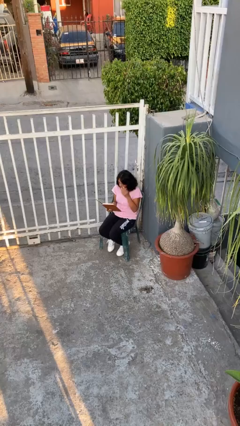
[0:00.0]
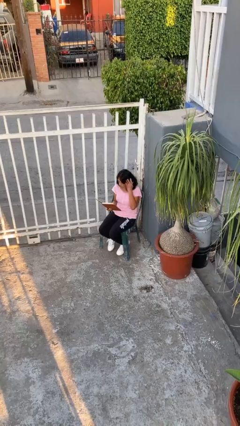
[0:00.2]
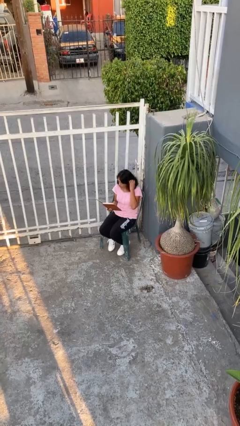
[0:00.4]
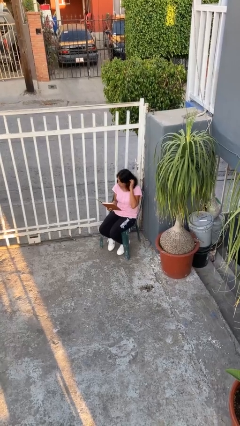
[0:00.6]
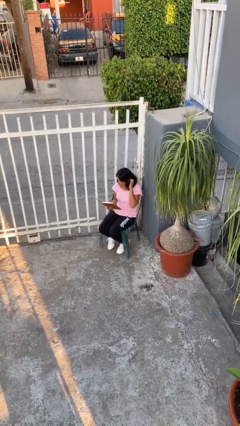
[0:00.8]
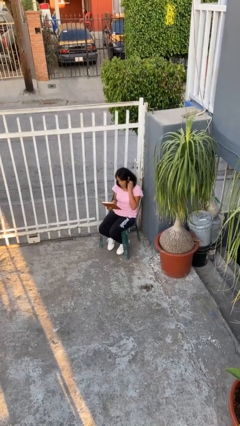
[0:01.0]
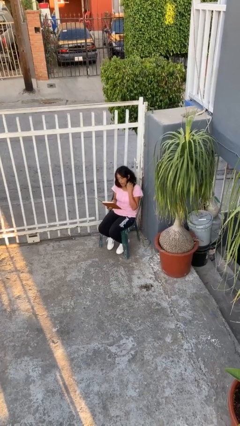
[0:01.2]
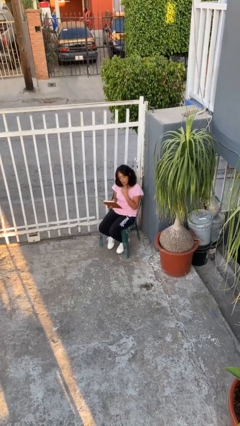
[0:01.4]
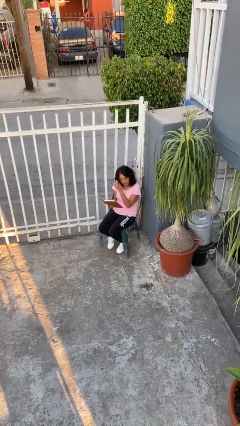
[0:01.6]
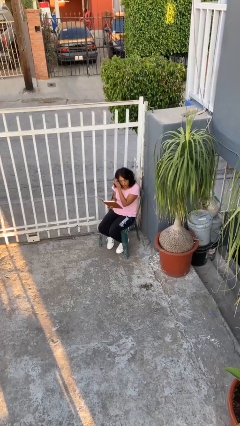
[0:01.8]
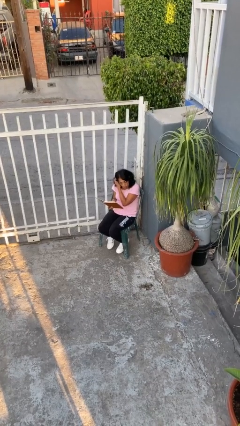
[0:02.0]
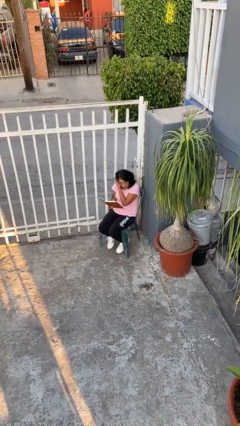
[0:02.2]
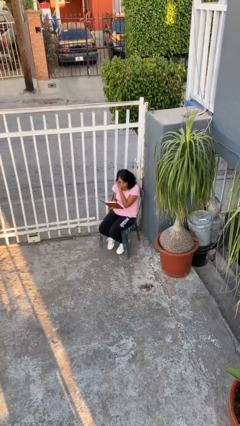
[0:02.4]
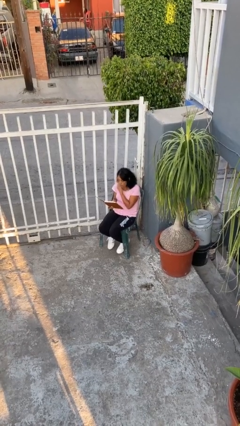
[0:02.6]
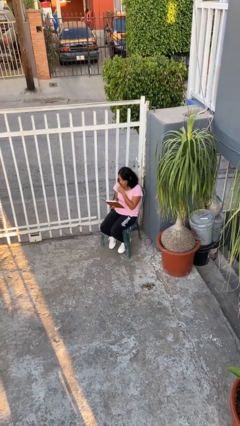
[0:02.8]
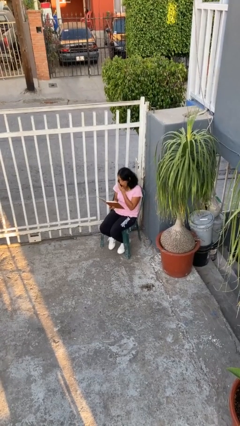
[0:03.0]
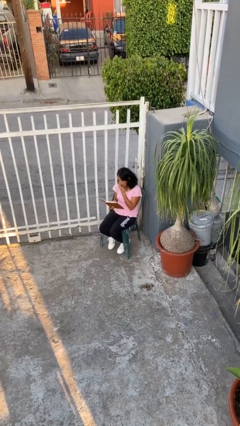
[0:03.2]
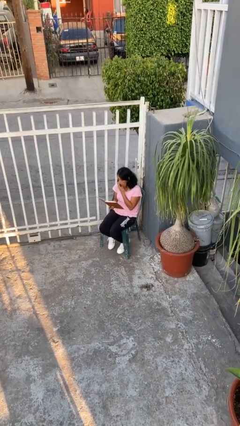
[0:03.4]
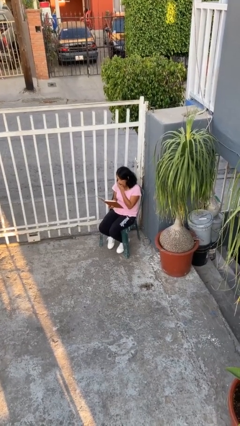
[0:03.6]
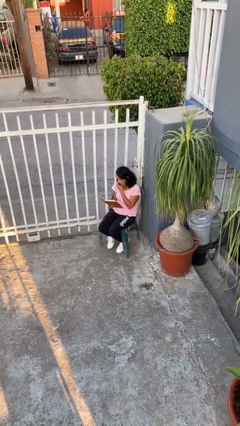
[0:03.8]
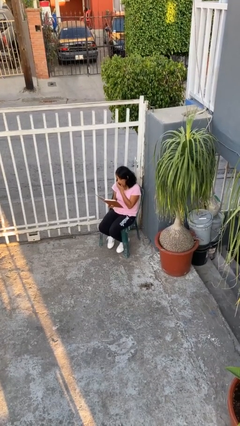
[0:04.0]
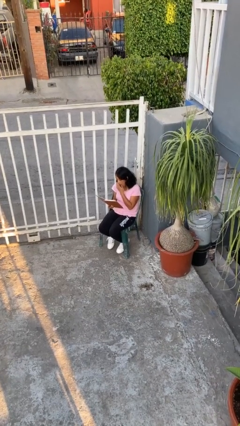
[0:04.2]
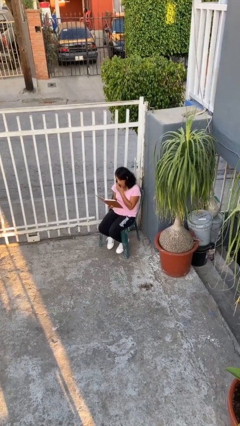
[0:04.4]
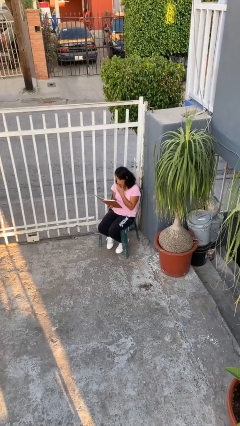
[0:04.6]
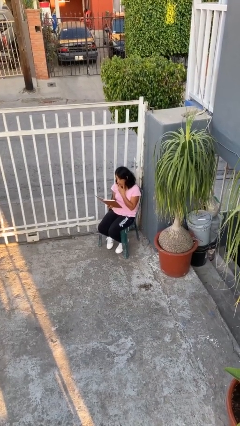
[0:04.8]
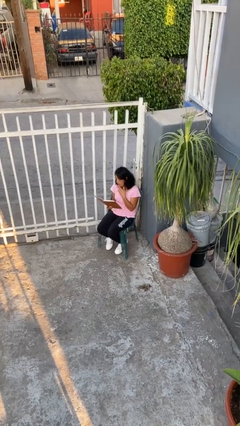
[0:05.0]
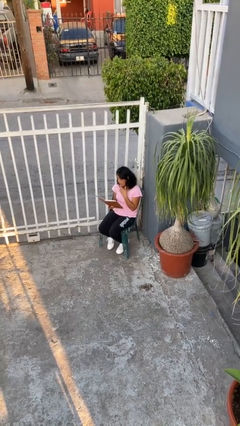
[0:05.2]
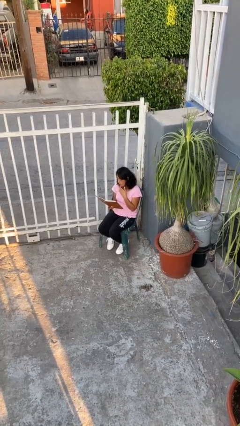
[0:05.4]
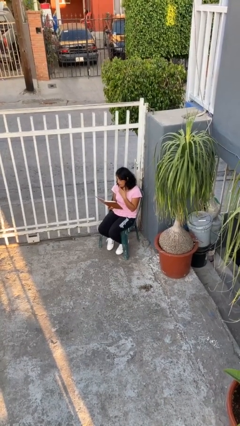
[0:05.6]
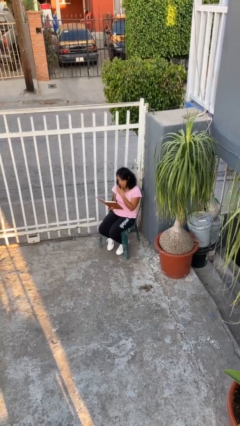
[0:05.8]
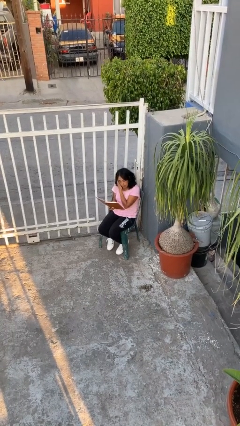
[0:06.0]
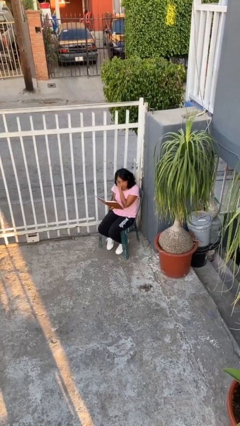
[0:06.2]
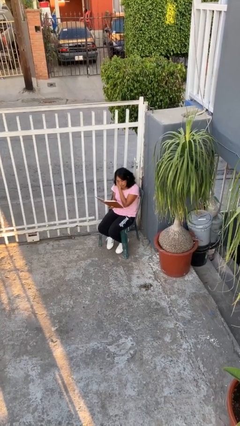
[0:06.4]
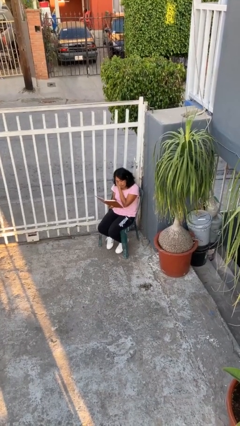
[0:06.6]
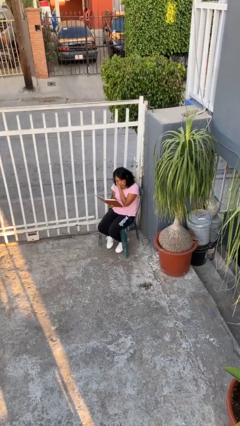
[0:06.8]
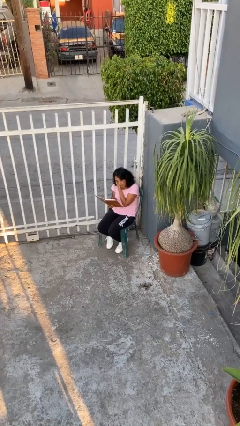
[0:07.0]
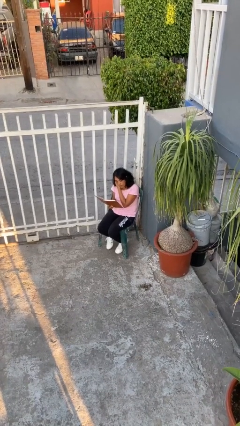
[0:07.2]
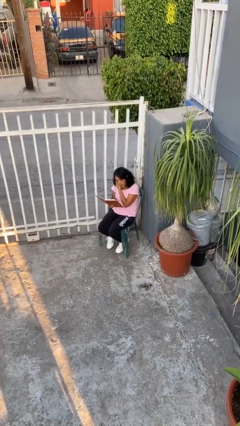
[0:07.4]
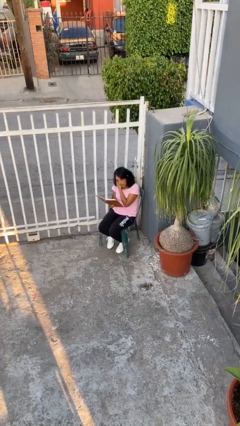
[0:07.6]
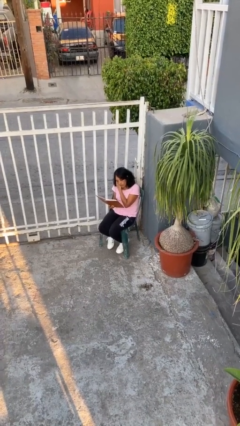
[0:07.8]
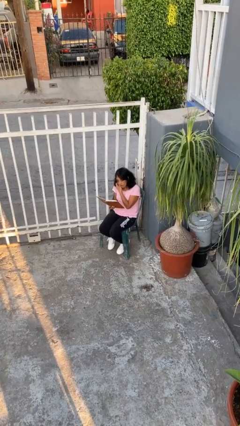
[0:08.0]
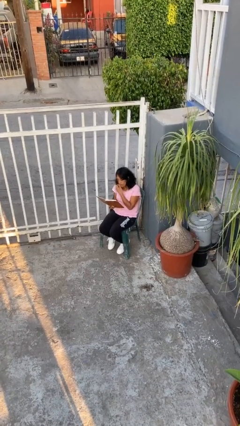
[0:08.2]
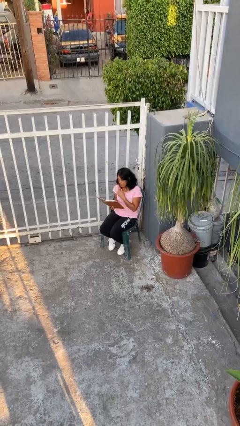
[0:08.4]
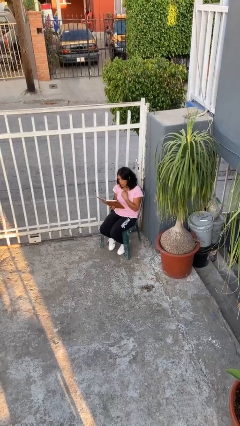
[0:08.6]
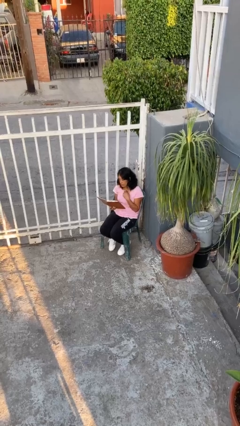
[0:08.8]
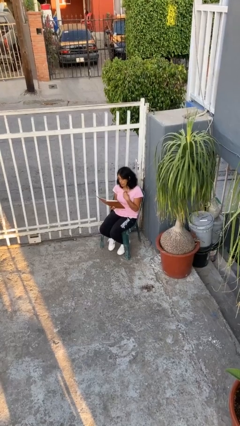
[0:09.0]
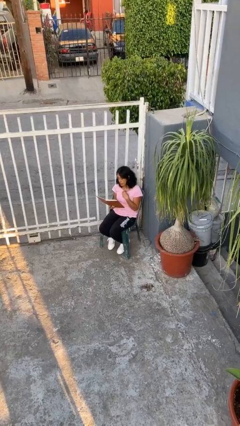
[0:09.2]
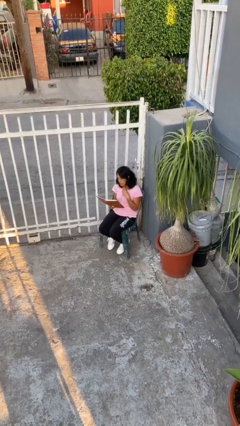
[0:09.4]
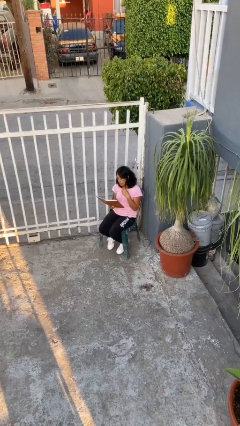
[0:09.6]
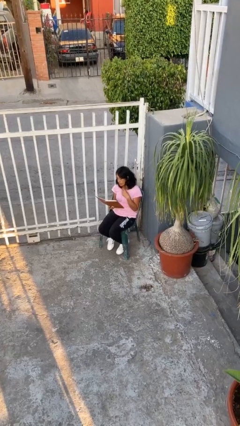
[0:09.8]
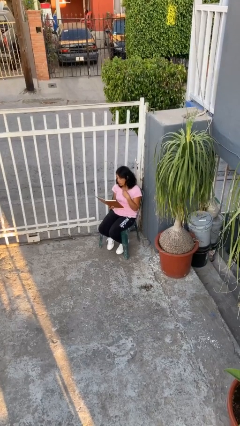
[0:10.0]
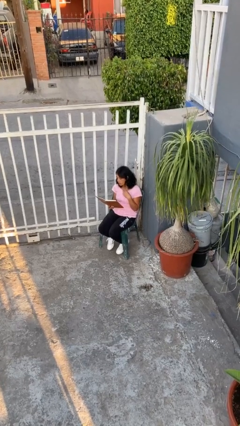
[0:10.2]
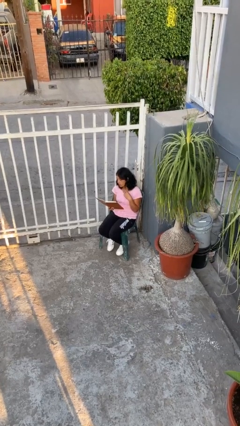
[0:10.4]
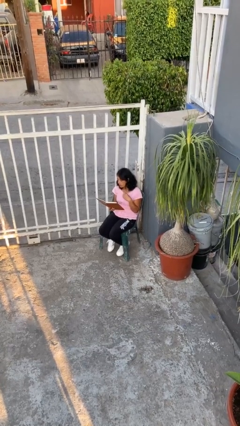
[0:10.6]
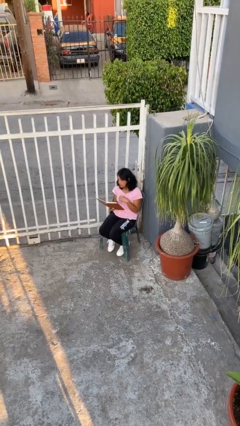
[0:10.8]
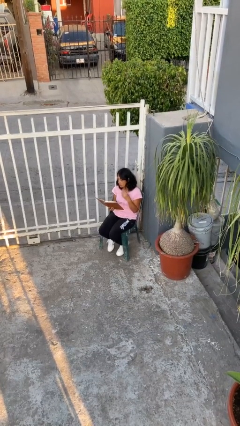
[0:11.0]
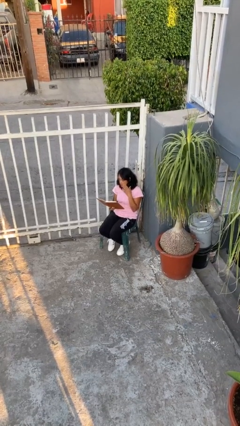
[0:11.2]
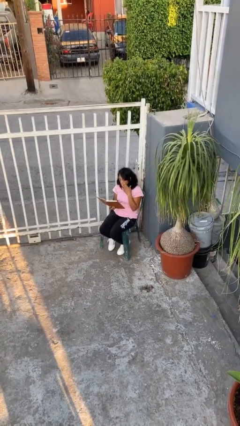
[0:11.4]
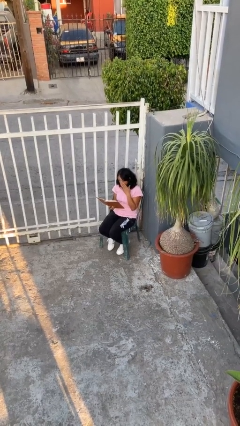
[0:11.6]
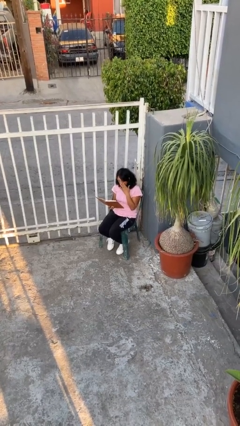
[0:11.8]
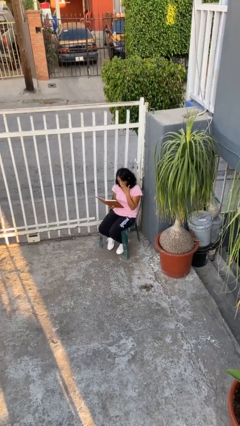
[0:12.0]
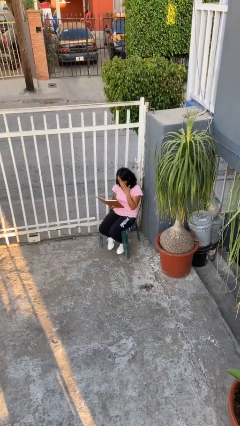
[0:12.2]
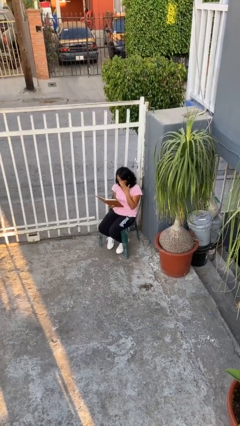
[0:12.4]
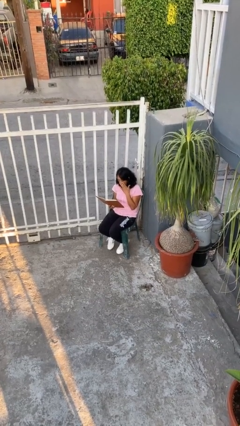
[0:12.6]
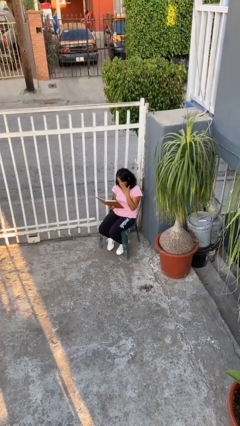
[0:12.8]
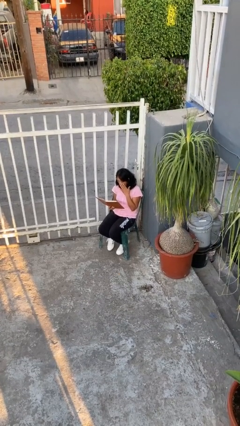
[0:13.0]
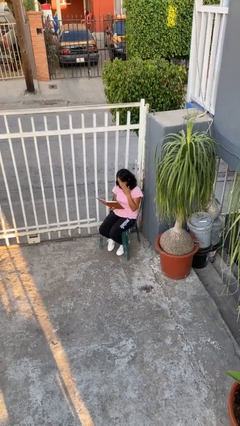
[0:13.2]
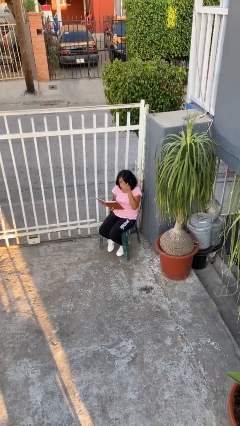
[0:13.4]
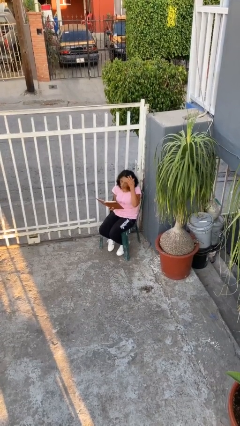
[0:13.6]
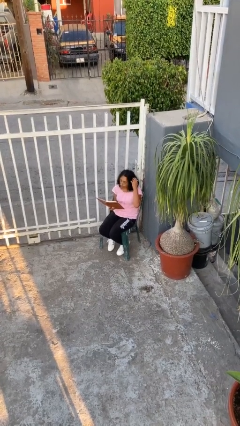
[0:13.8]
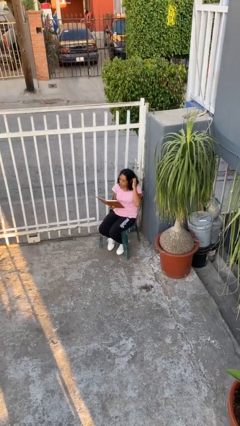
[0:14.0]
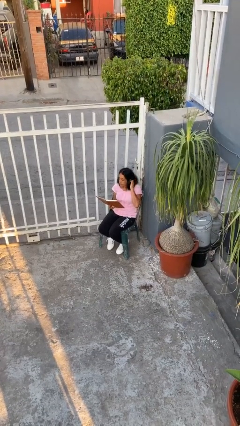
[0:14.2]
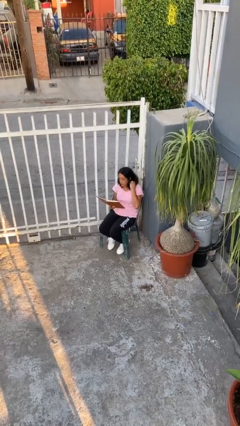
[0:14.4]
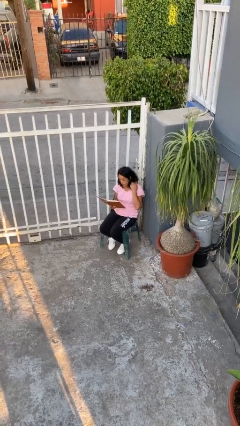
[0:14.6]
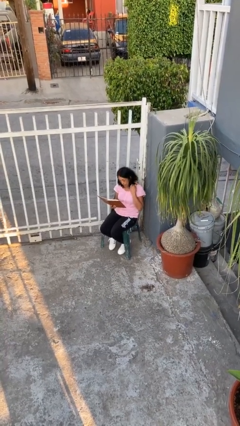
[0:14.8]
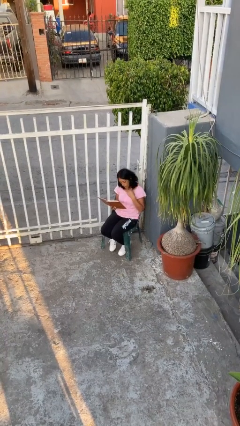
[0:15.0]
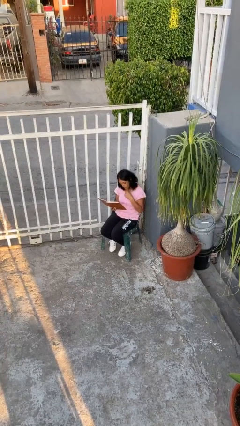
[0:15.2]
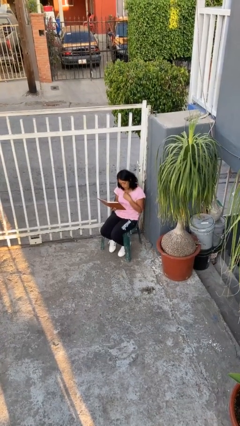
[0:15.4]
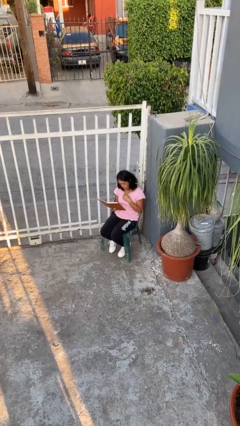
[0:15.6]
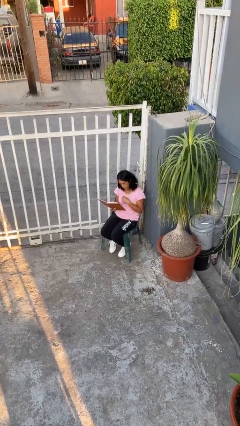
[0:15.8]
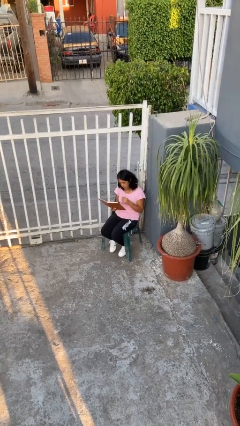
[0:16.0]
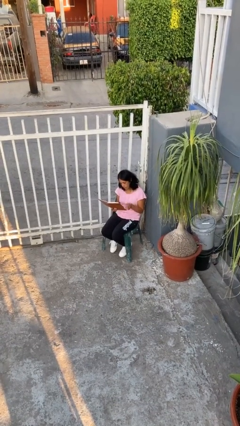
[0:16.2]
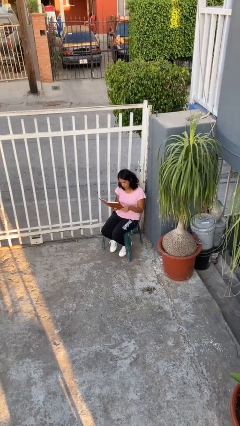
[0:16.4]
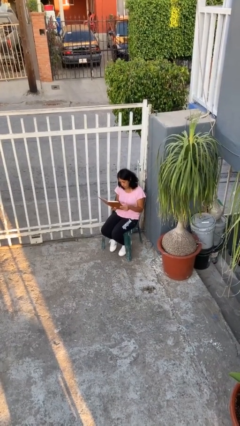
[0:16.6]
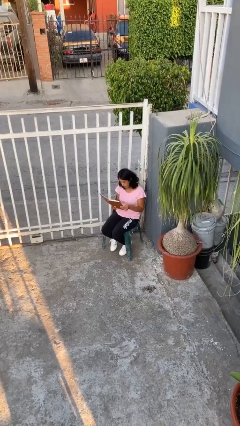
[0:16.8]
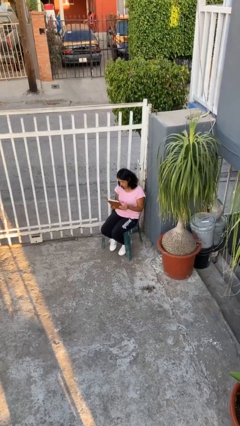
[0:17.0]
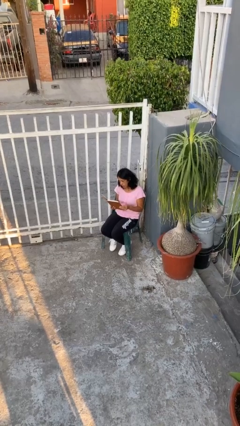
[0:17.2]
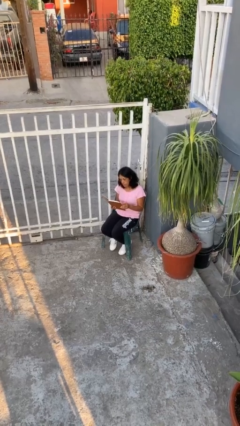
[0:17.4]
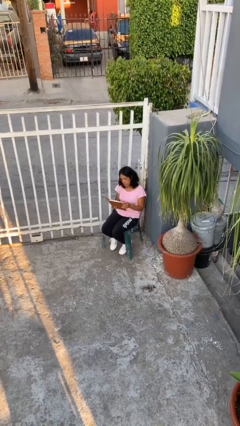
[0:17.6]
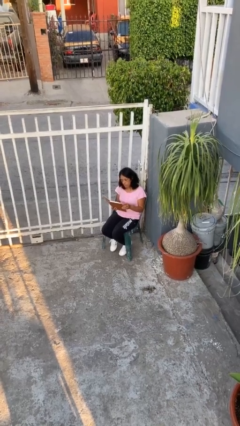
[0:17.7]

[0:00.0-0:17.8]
person reads document
